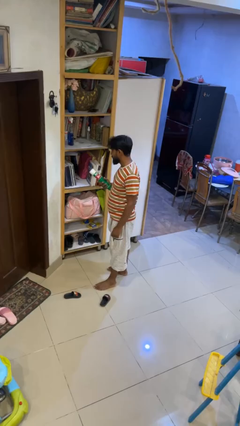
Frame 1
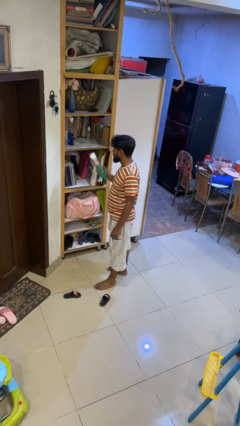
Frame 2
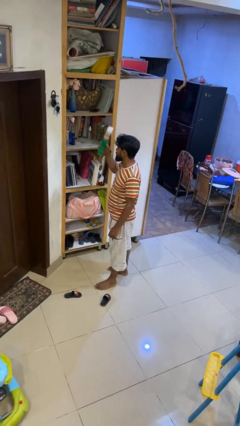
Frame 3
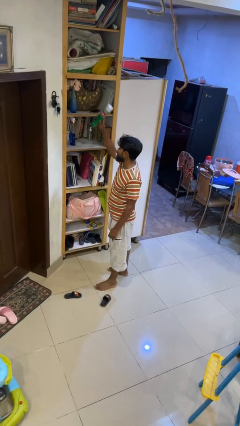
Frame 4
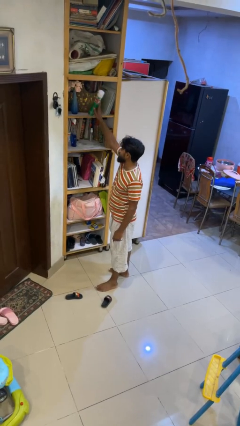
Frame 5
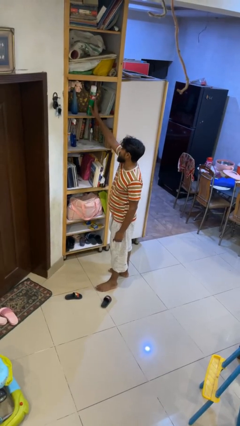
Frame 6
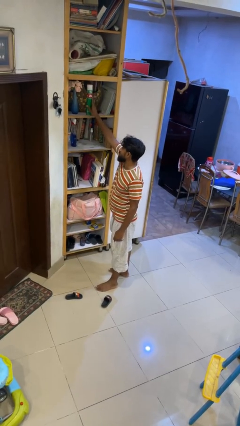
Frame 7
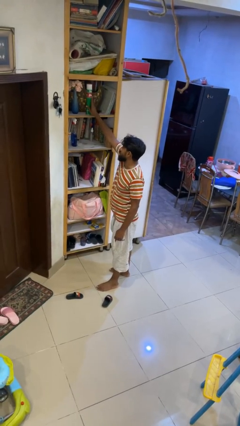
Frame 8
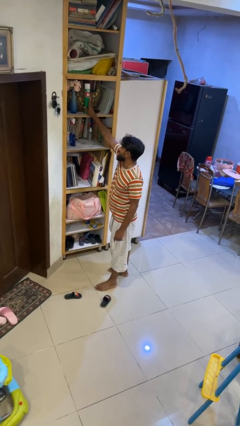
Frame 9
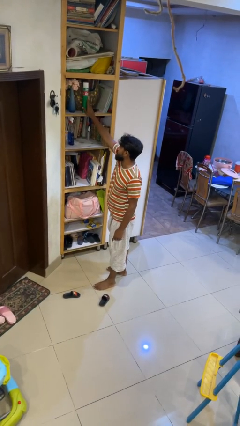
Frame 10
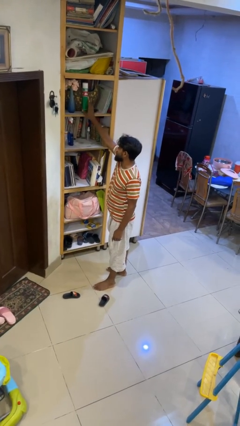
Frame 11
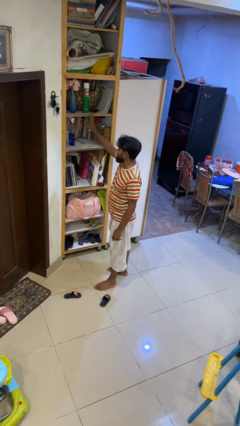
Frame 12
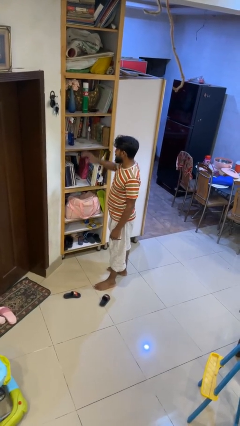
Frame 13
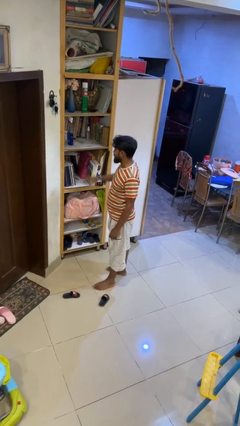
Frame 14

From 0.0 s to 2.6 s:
person puts down object on shelf

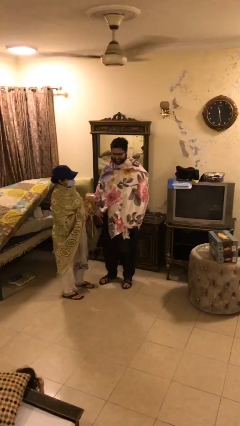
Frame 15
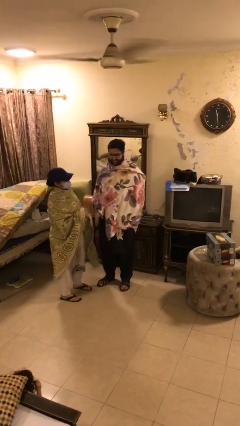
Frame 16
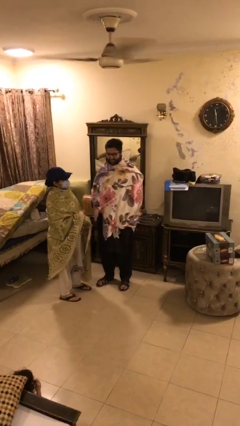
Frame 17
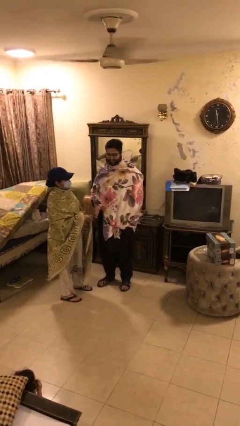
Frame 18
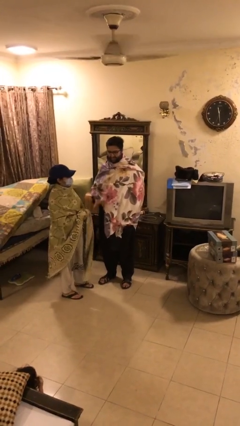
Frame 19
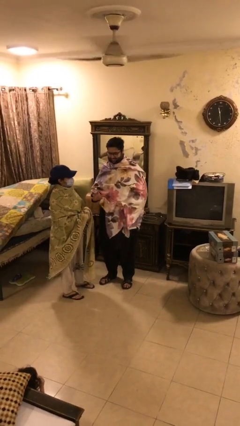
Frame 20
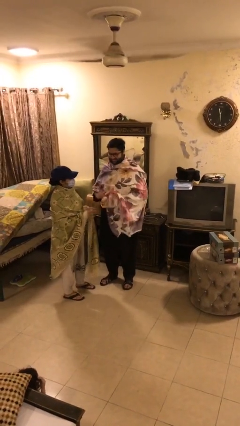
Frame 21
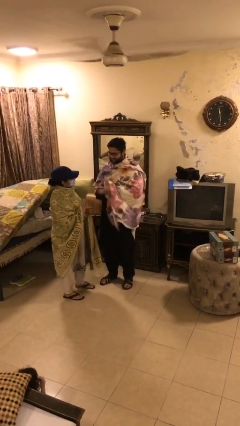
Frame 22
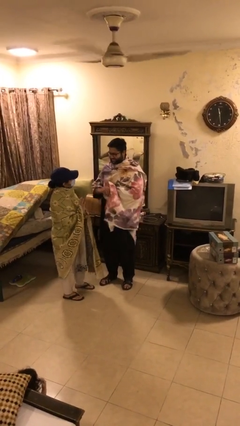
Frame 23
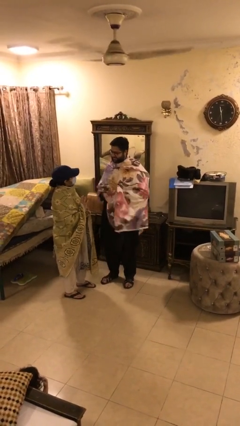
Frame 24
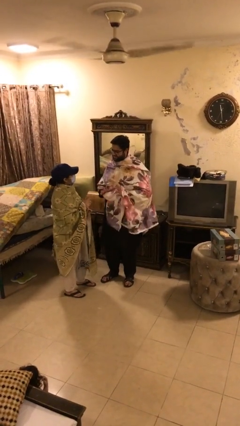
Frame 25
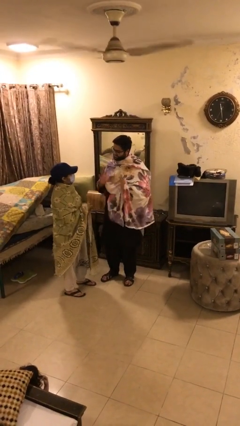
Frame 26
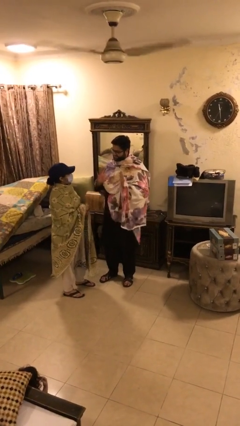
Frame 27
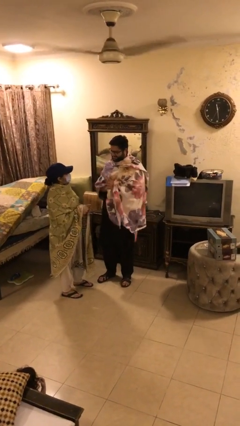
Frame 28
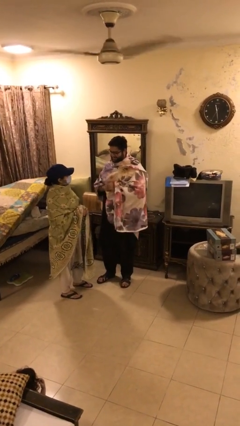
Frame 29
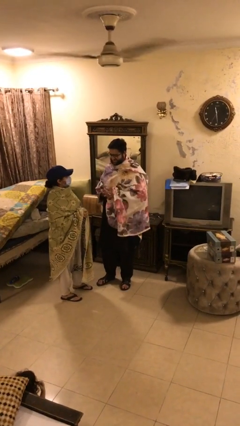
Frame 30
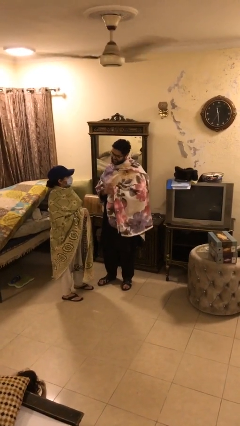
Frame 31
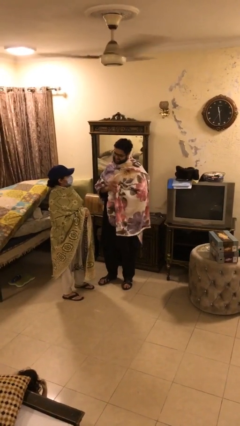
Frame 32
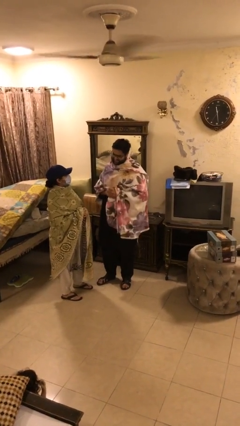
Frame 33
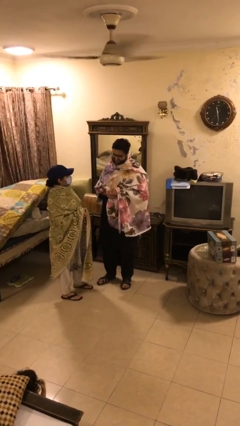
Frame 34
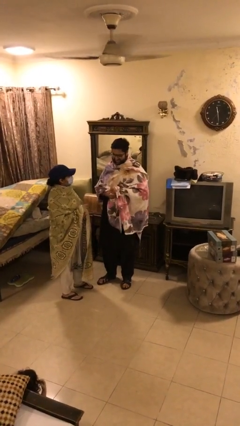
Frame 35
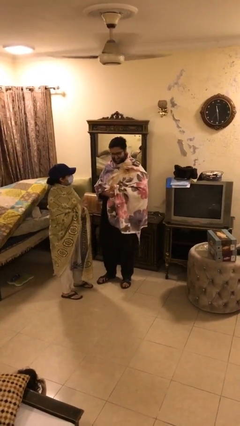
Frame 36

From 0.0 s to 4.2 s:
person talks to person

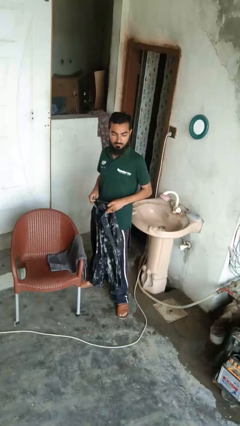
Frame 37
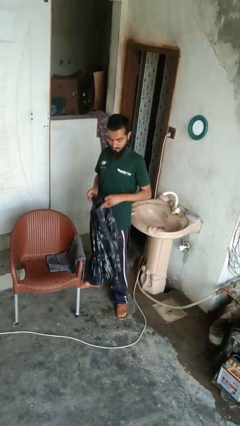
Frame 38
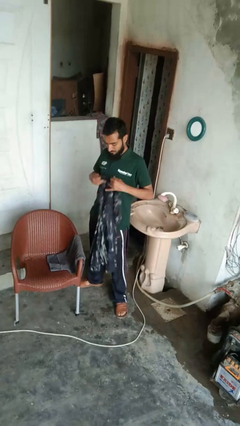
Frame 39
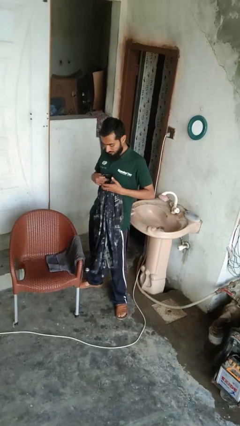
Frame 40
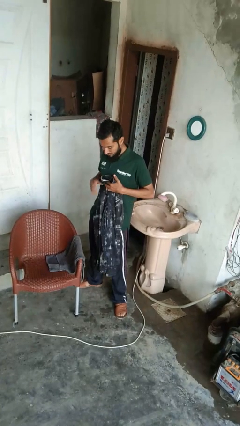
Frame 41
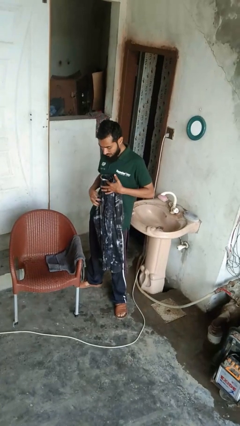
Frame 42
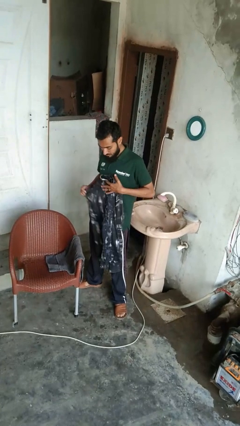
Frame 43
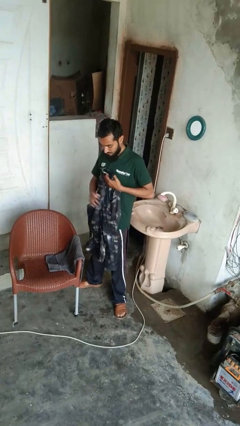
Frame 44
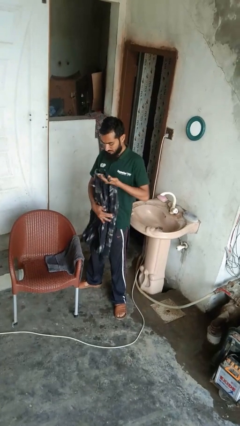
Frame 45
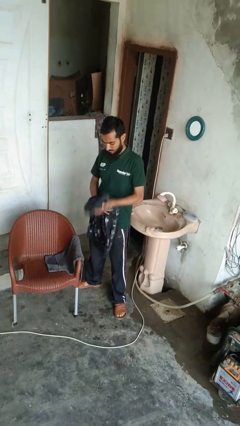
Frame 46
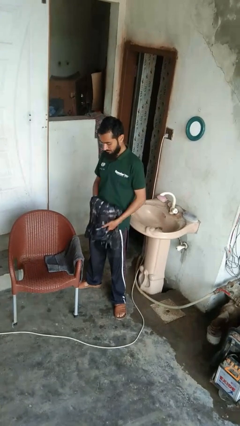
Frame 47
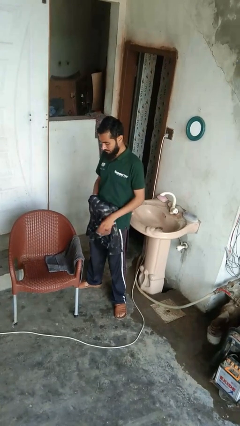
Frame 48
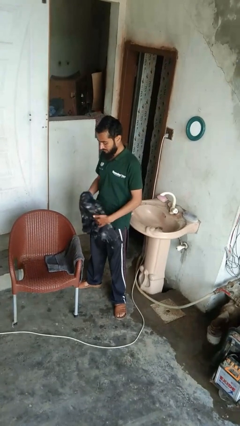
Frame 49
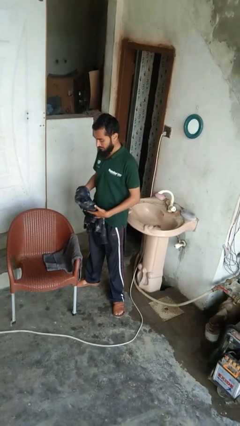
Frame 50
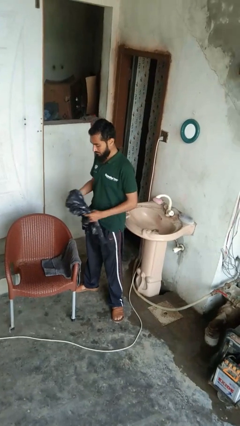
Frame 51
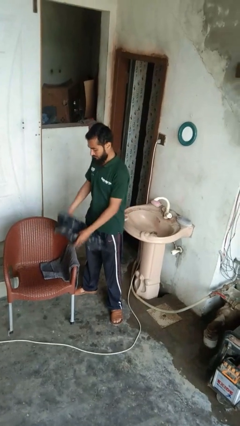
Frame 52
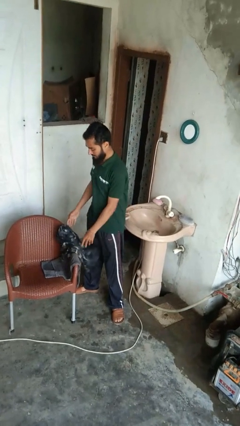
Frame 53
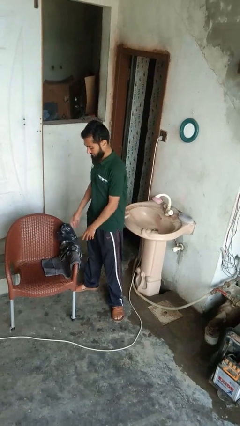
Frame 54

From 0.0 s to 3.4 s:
person folds shirt

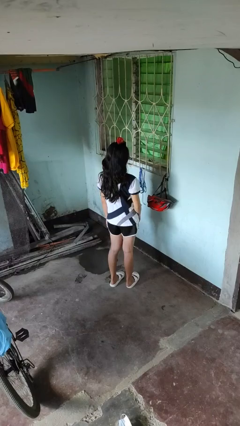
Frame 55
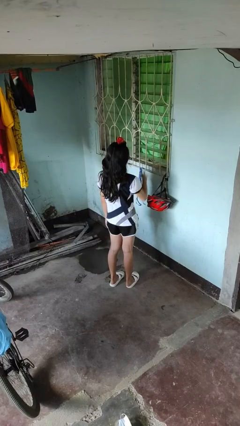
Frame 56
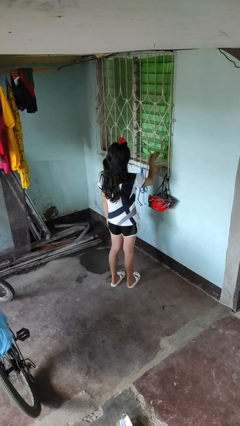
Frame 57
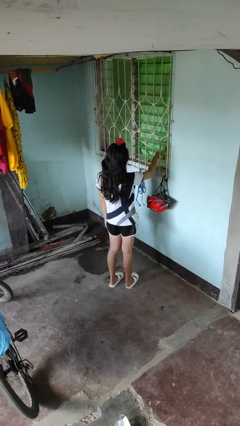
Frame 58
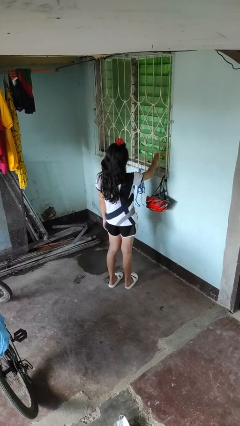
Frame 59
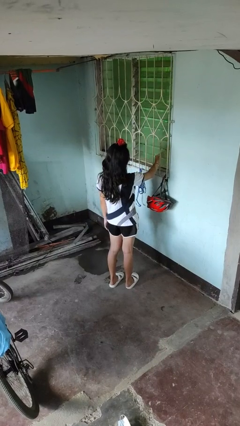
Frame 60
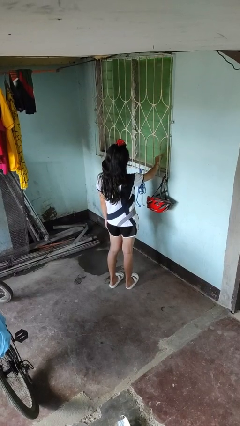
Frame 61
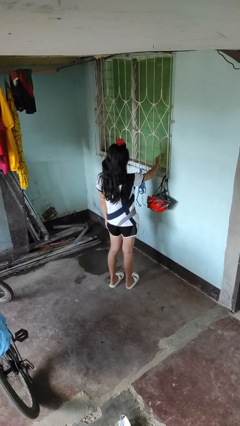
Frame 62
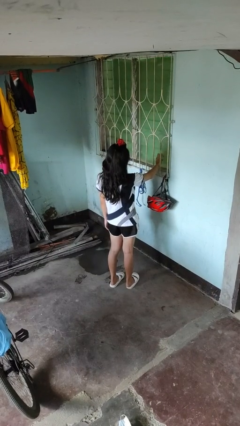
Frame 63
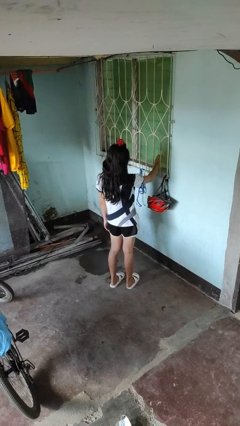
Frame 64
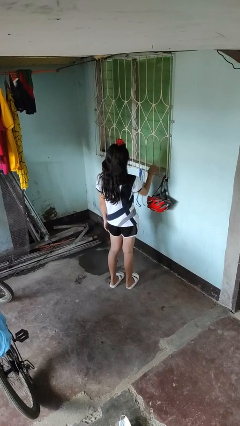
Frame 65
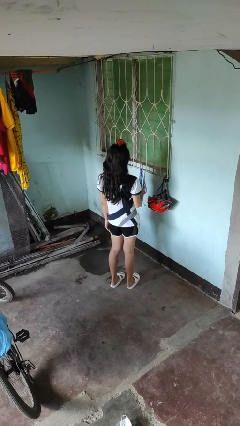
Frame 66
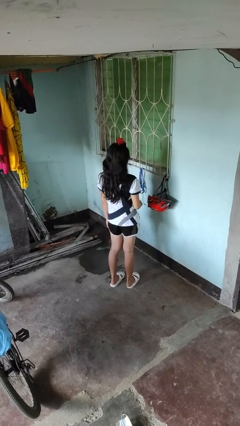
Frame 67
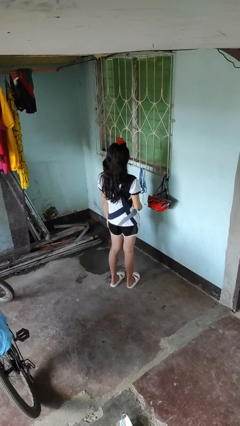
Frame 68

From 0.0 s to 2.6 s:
person closes home window

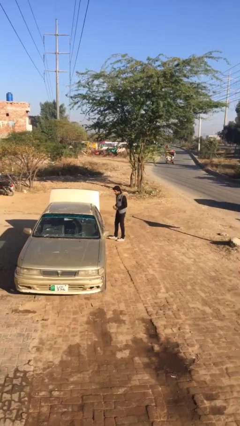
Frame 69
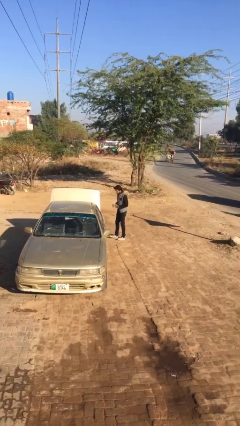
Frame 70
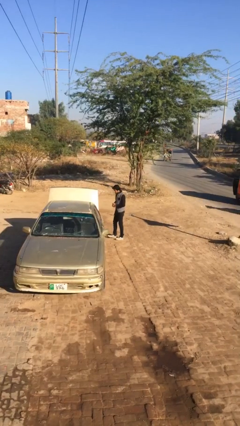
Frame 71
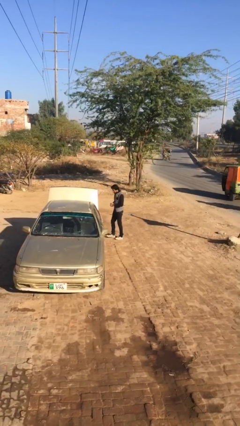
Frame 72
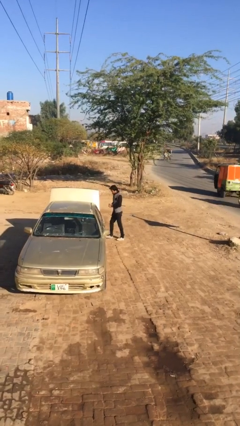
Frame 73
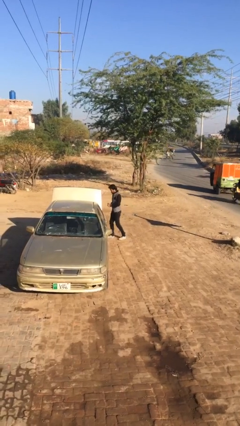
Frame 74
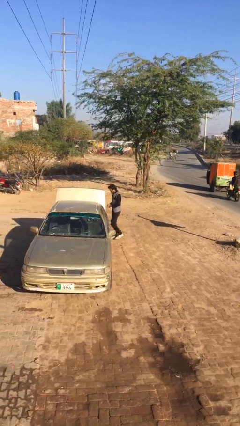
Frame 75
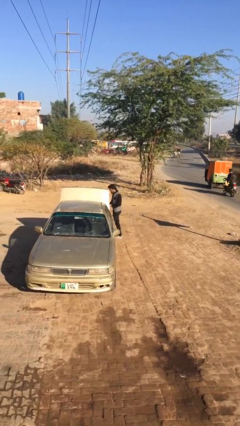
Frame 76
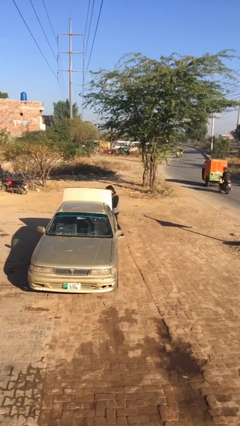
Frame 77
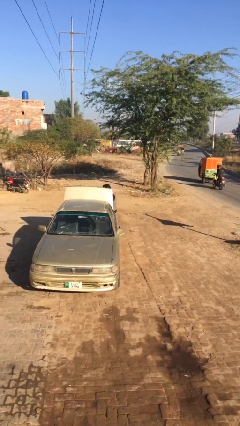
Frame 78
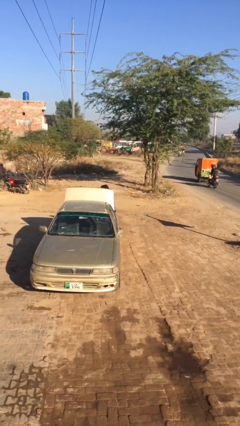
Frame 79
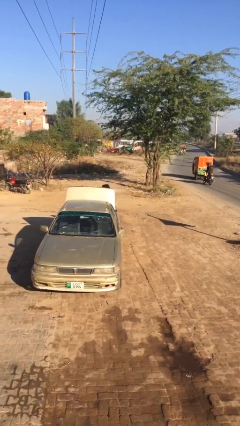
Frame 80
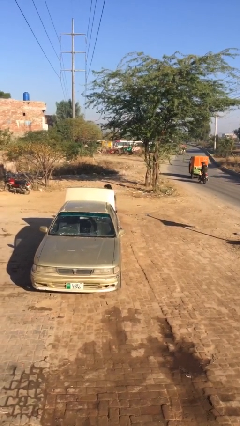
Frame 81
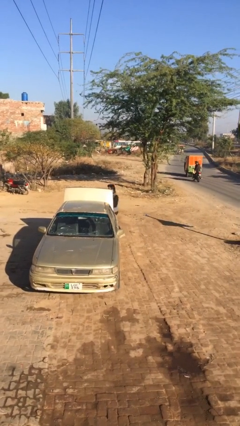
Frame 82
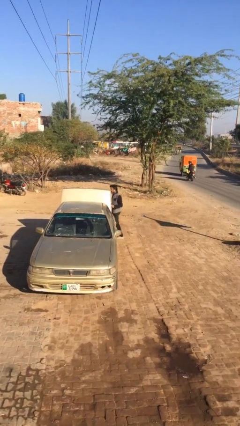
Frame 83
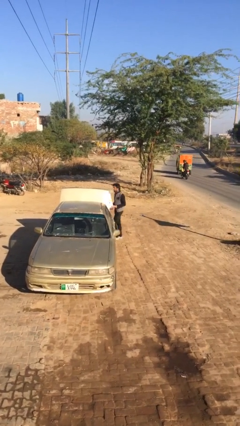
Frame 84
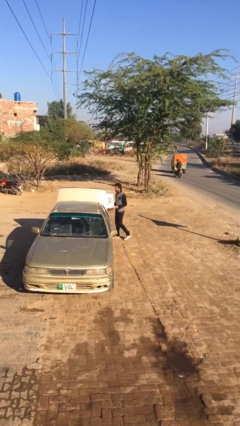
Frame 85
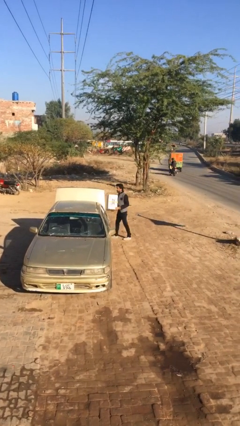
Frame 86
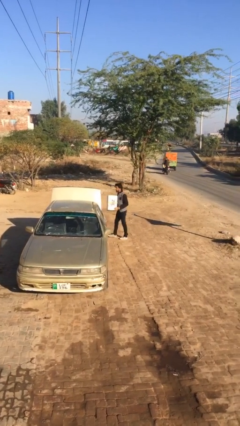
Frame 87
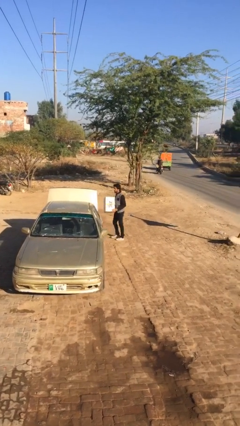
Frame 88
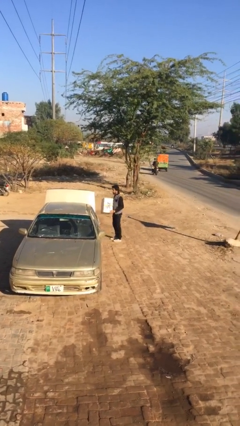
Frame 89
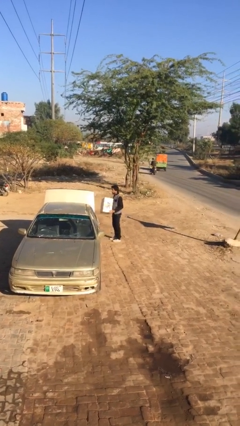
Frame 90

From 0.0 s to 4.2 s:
person unloads car

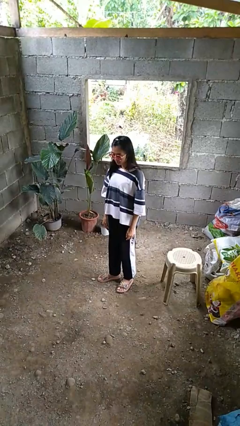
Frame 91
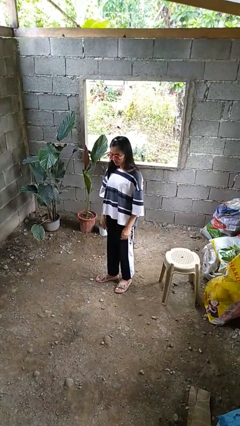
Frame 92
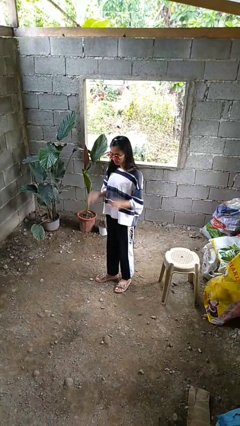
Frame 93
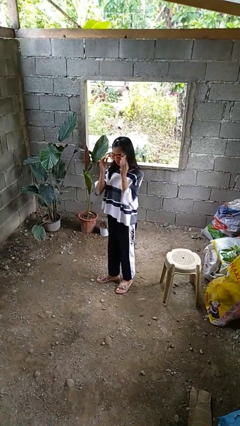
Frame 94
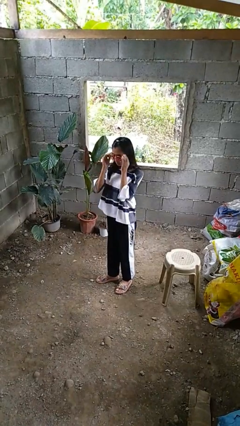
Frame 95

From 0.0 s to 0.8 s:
person takes off sunglasses
